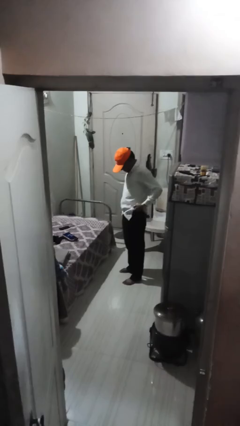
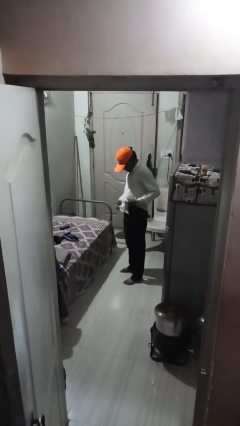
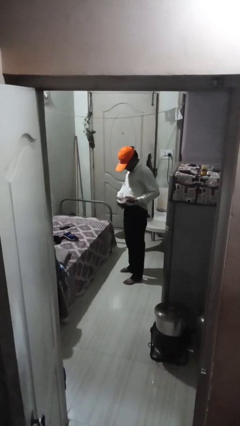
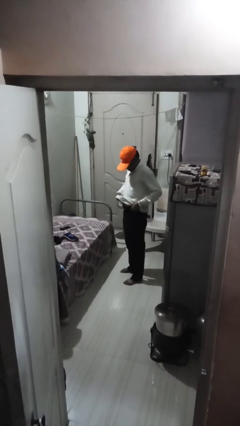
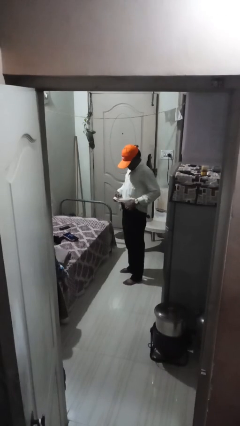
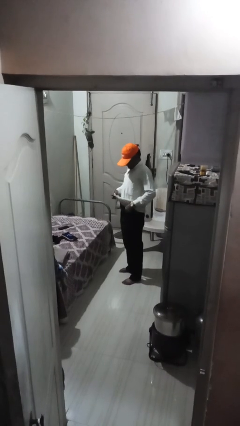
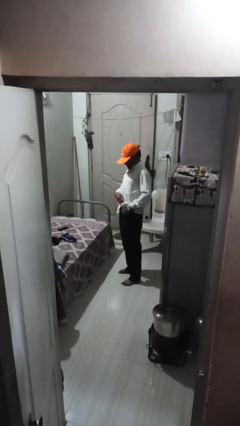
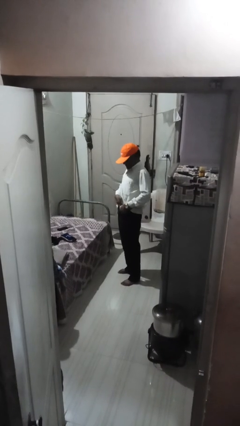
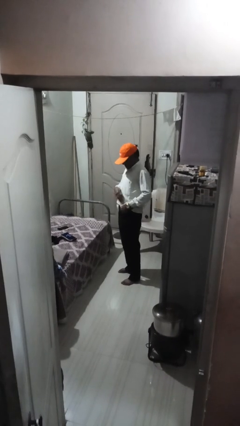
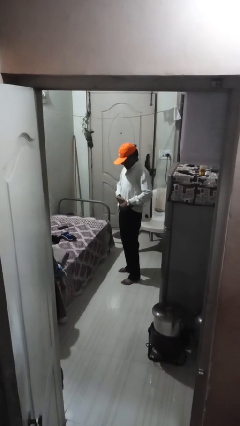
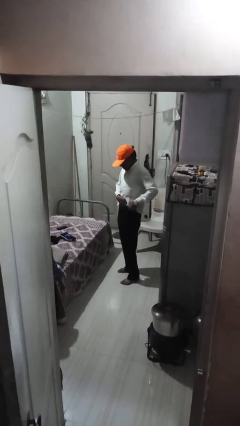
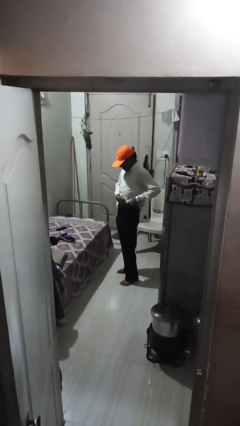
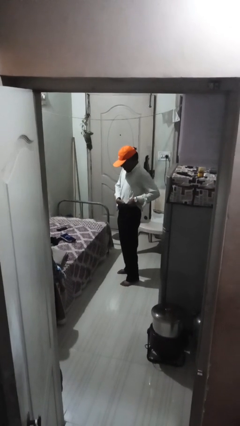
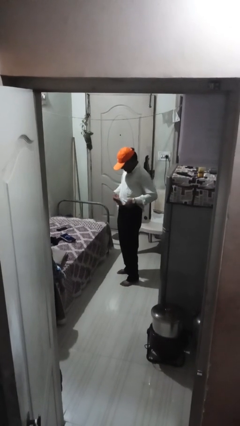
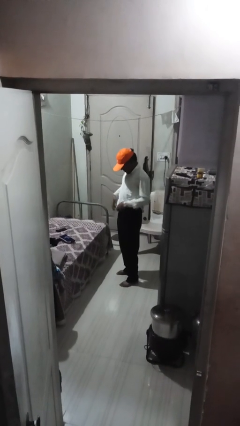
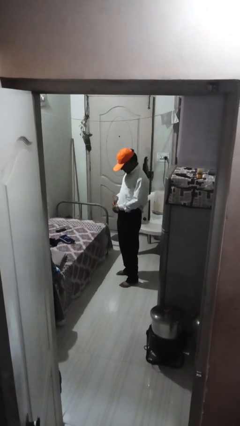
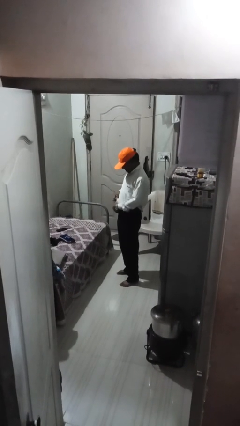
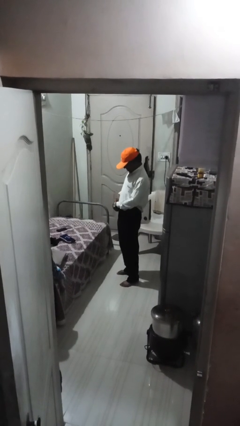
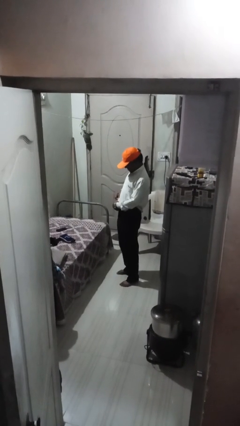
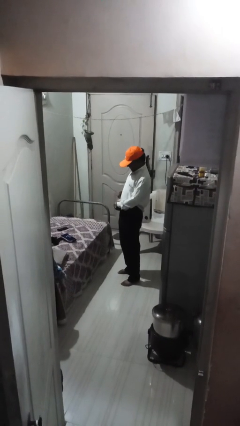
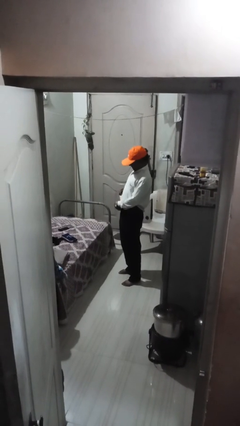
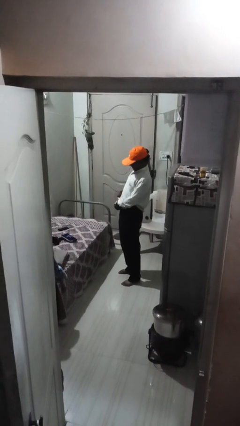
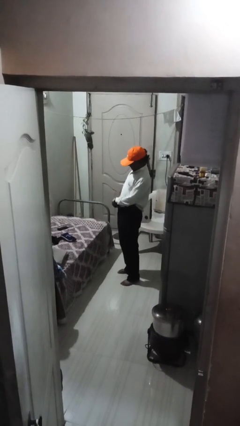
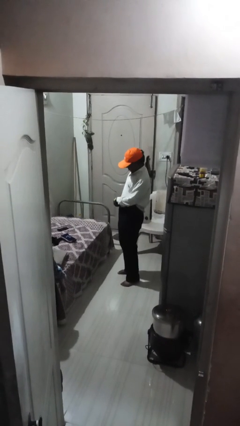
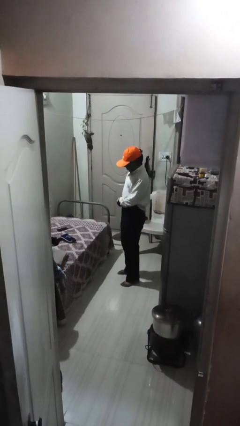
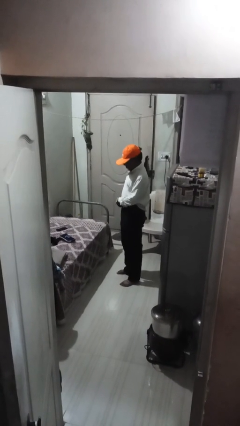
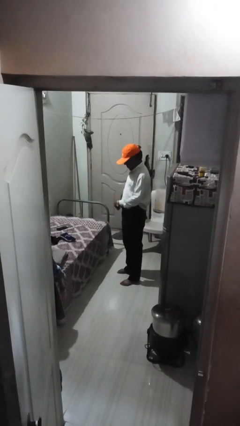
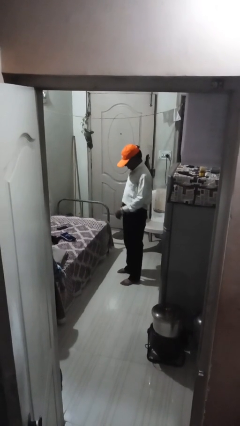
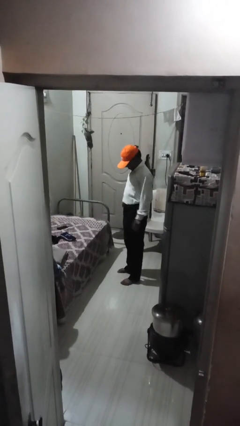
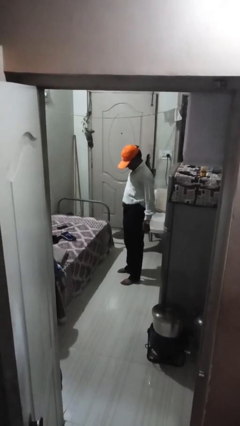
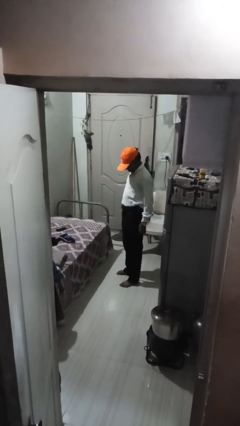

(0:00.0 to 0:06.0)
person tucks in shirt

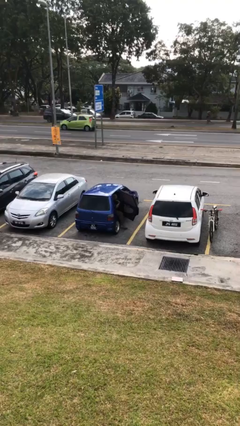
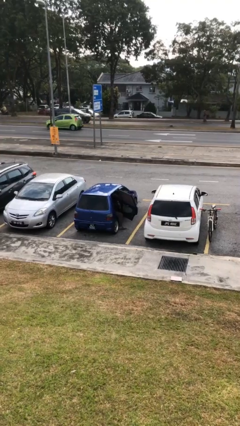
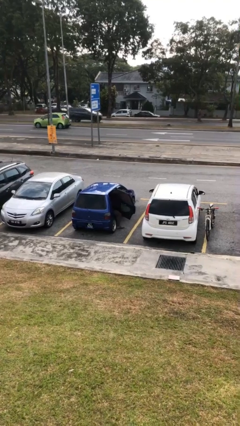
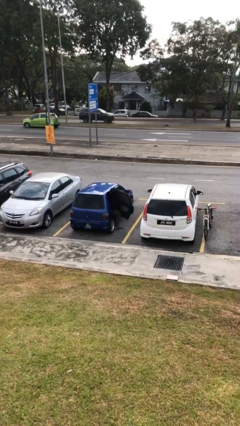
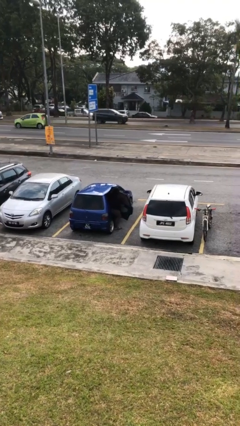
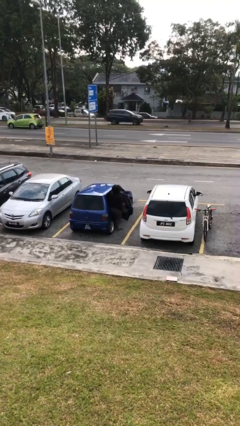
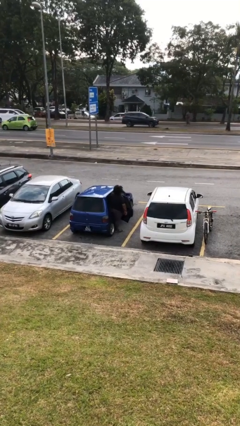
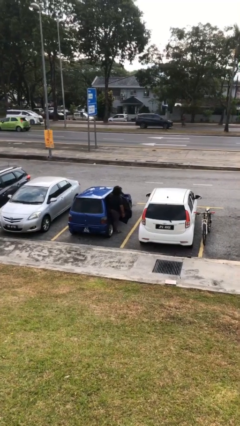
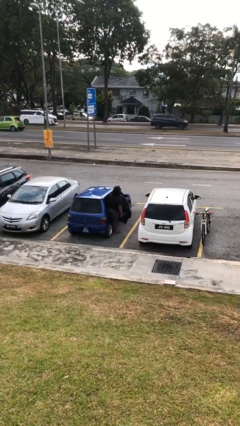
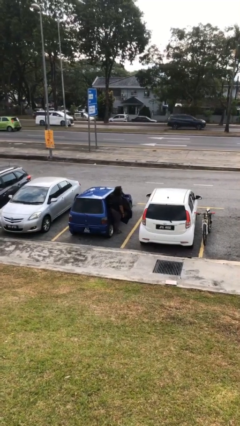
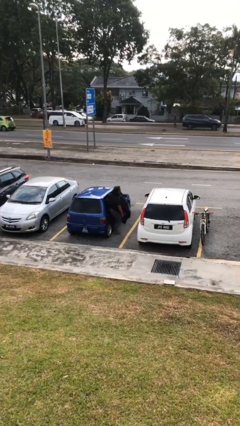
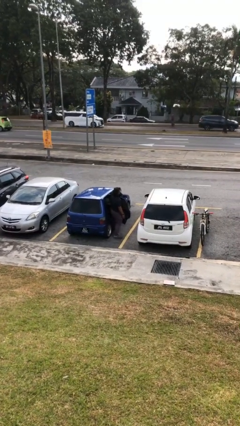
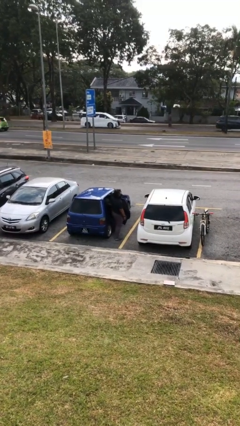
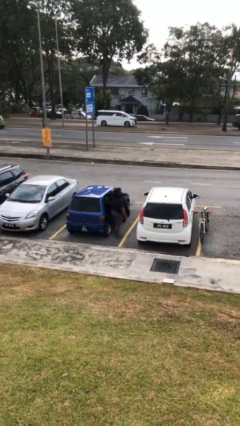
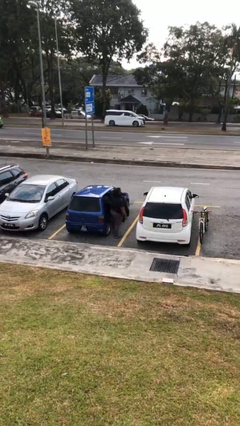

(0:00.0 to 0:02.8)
person exits car

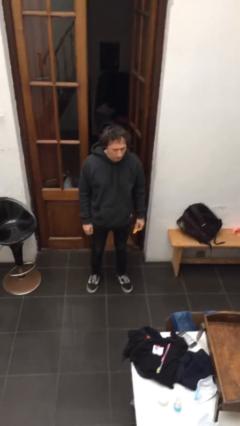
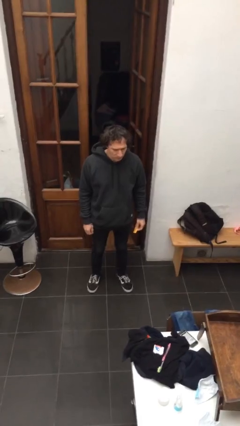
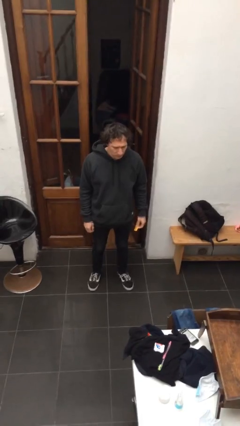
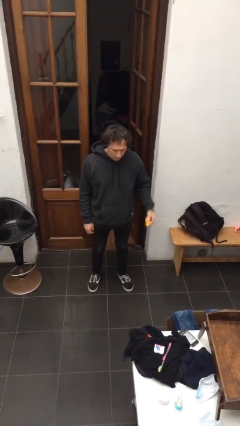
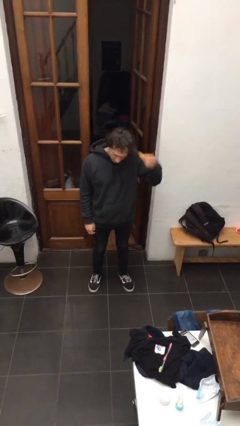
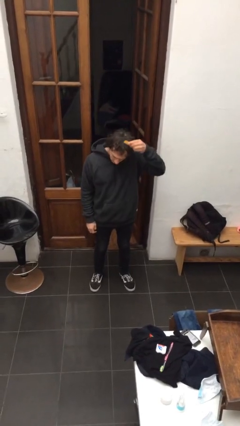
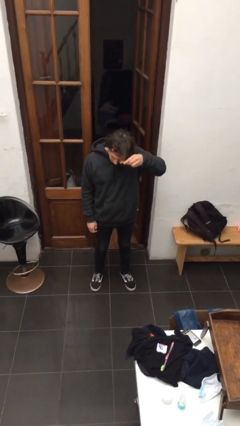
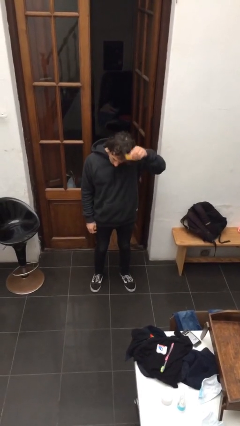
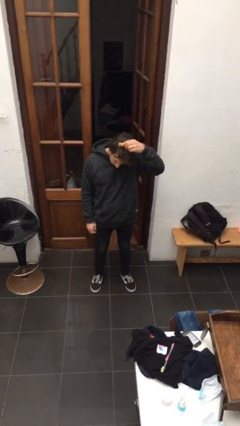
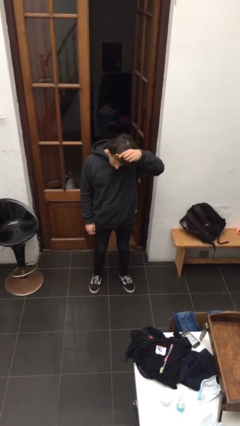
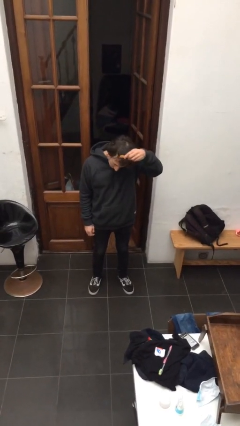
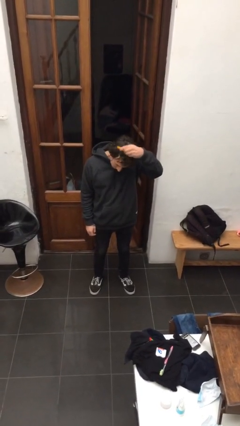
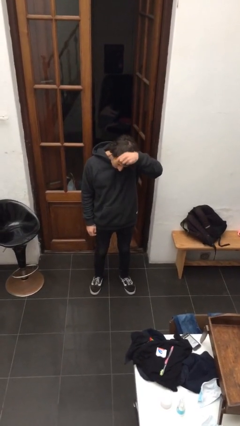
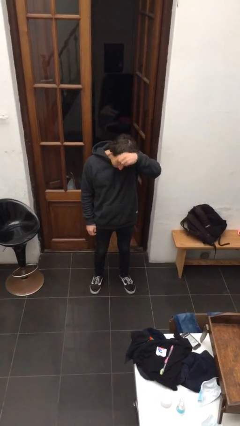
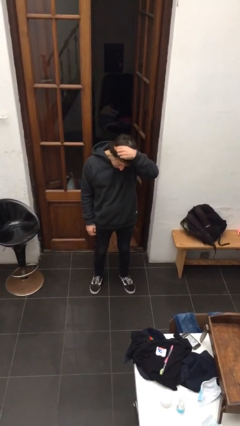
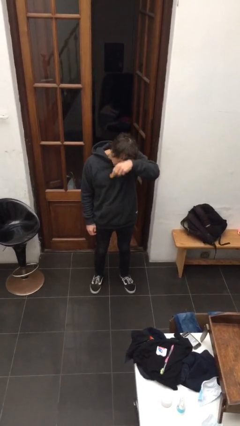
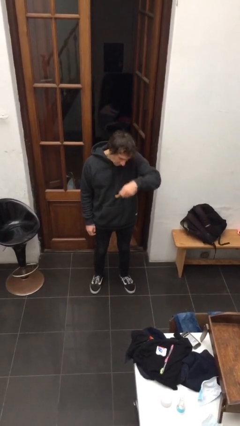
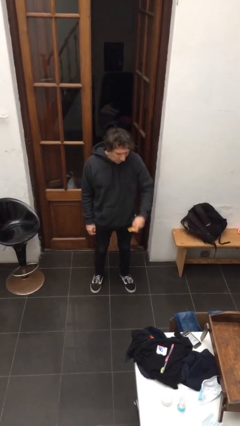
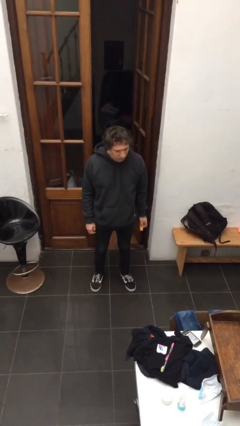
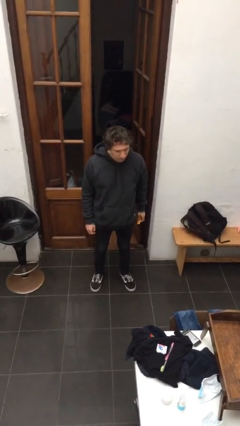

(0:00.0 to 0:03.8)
person brushes hair

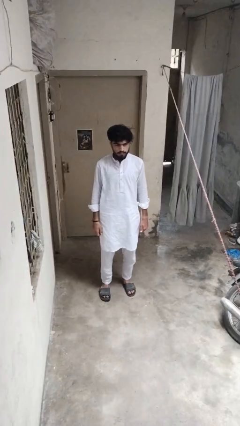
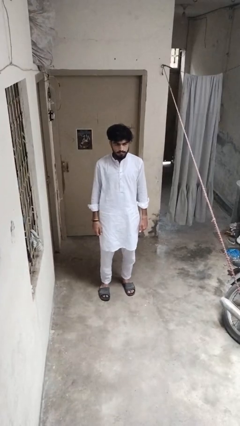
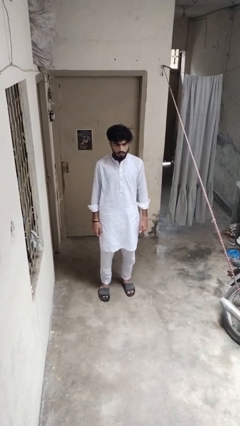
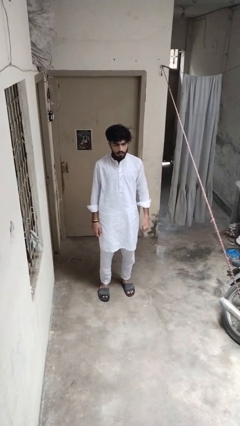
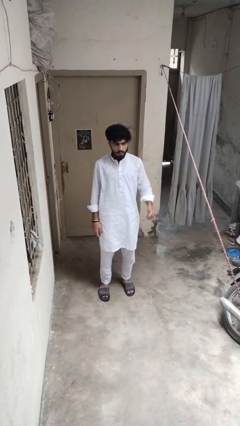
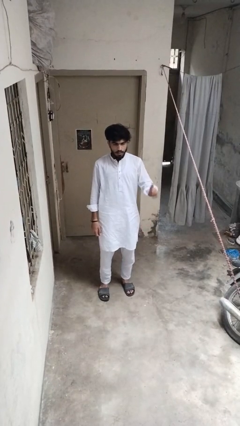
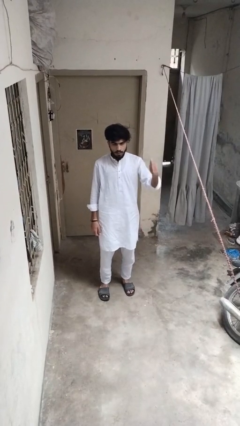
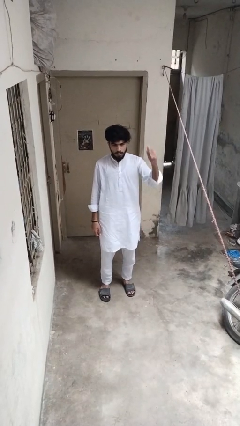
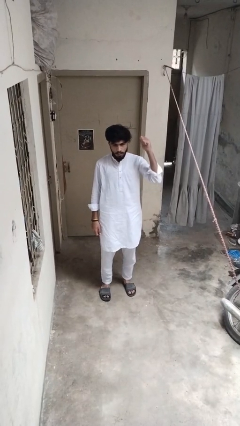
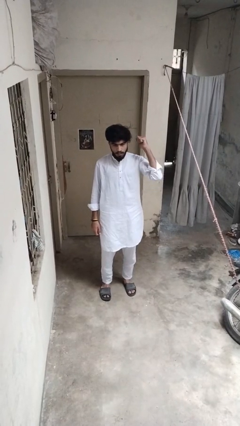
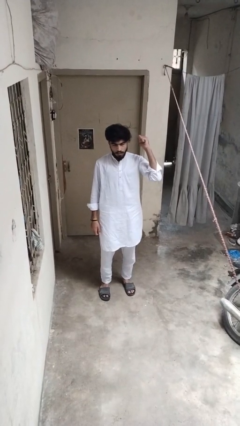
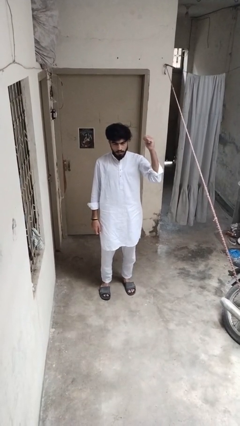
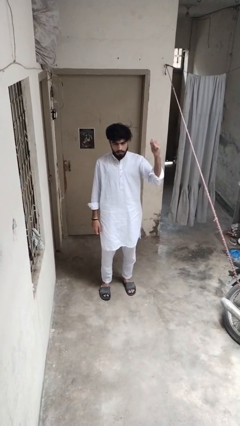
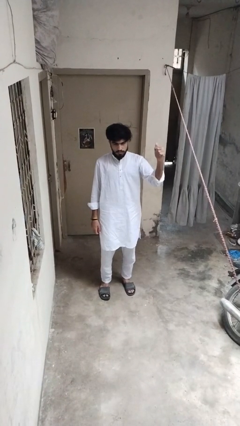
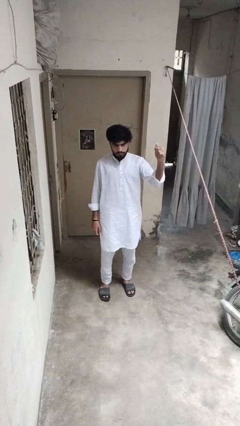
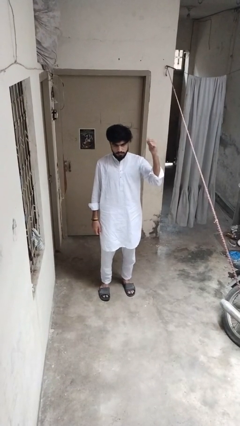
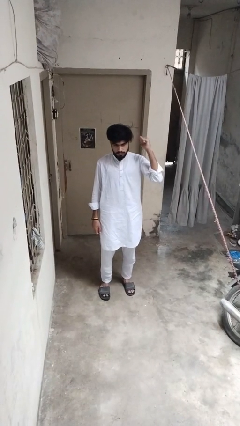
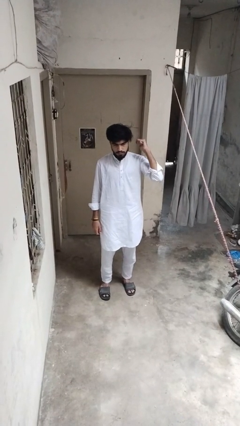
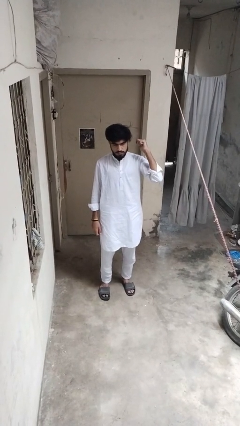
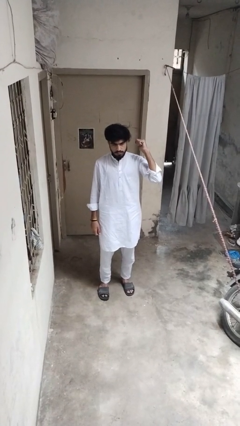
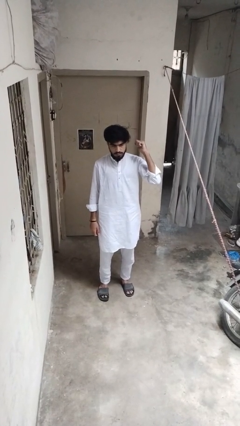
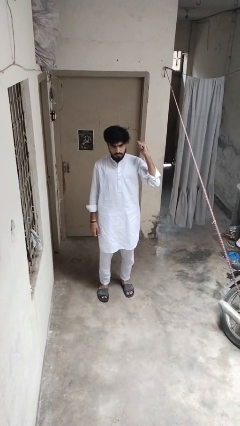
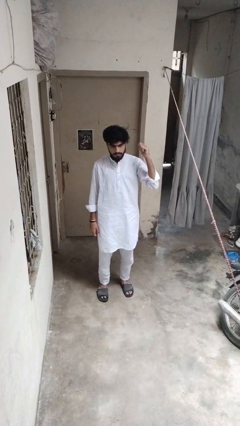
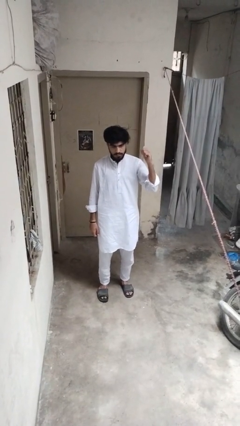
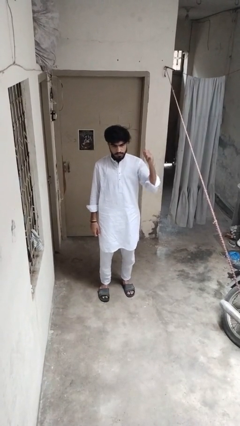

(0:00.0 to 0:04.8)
person gestures behind me

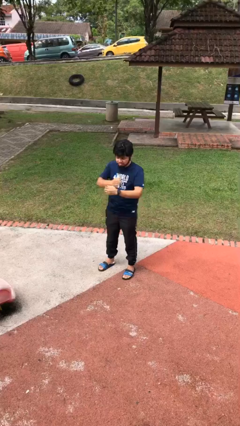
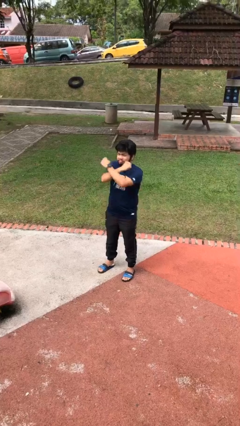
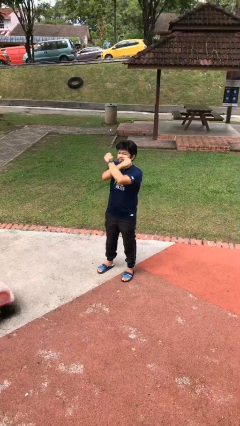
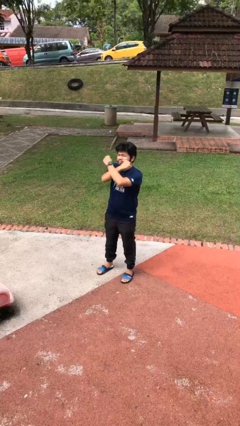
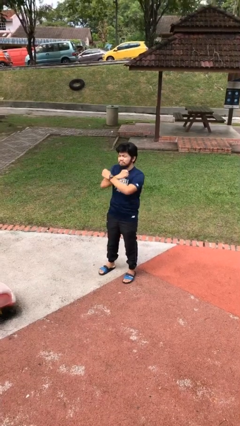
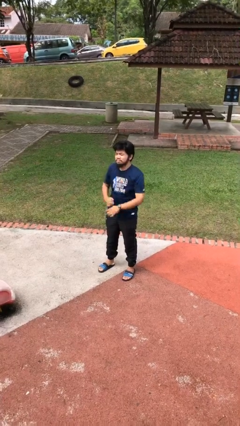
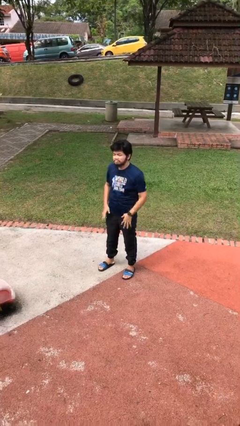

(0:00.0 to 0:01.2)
person gestures arms x
